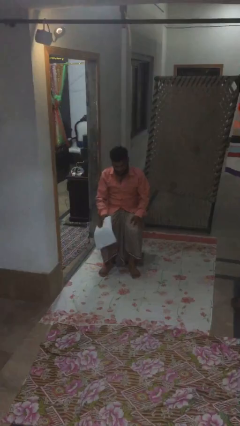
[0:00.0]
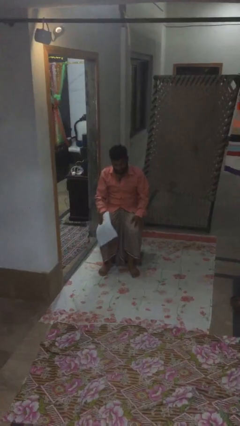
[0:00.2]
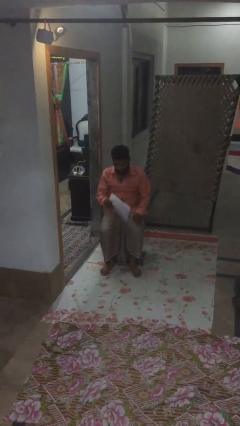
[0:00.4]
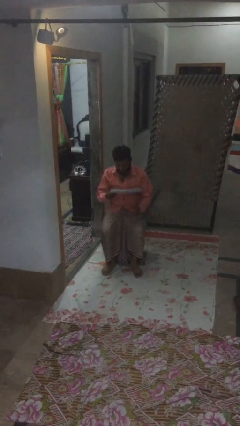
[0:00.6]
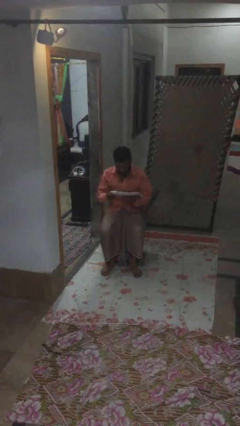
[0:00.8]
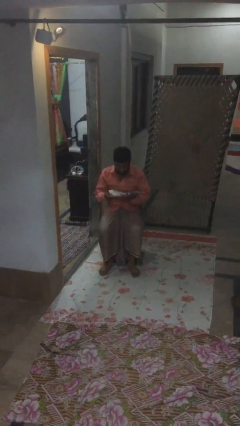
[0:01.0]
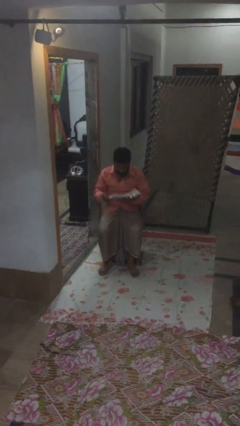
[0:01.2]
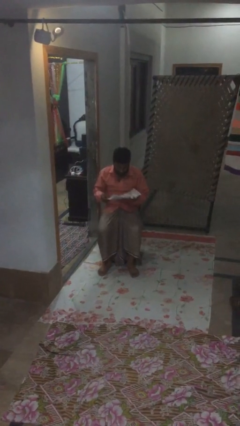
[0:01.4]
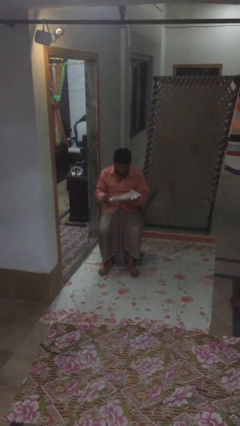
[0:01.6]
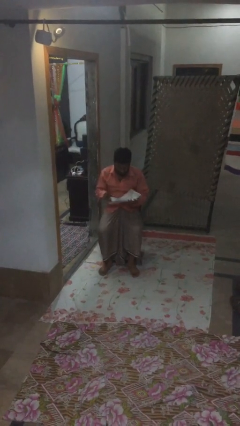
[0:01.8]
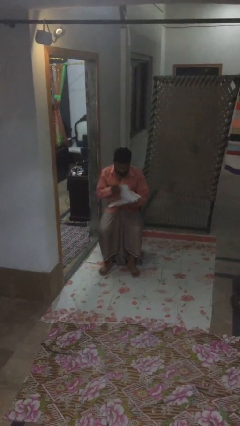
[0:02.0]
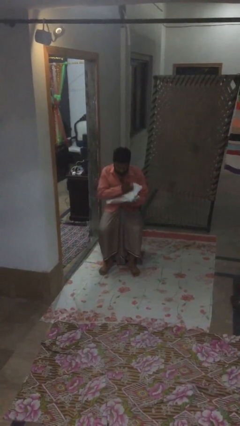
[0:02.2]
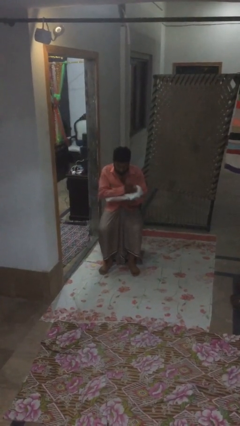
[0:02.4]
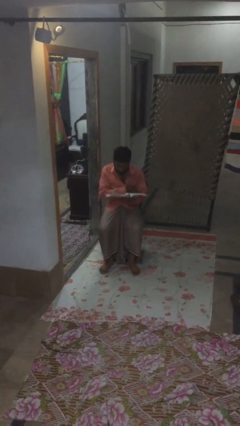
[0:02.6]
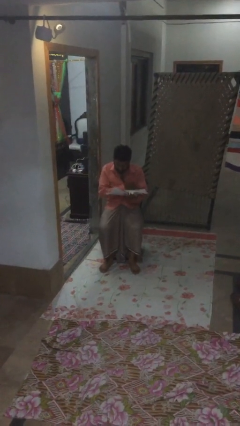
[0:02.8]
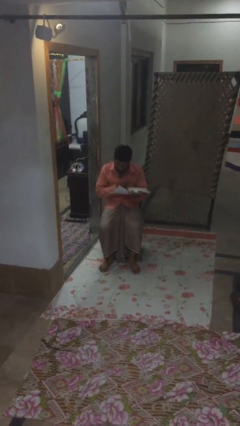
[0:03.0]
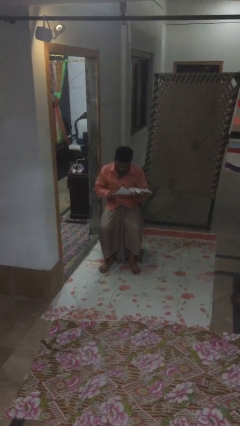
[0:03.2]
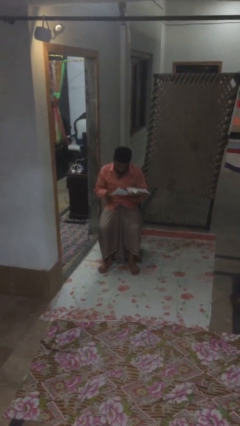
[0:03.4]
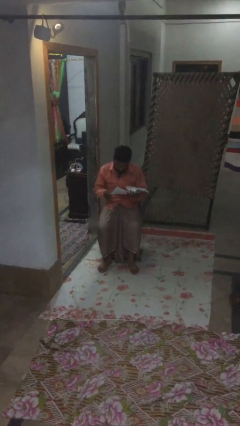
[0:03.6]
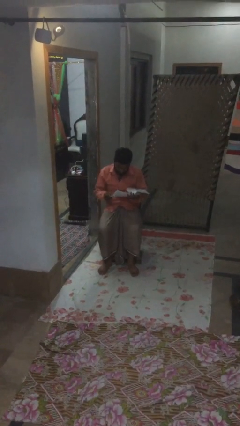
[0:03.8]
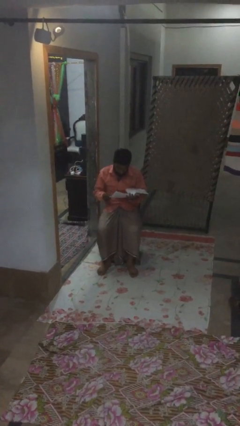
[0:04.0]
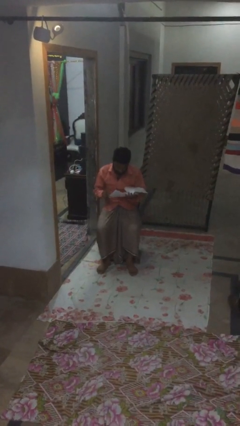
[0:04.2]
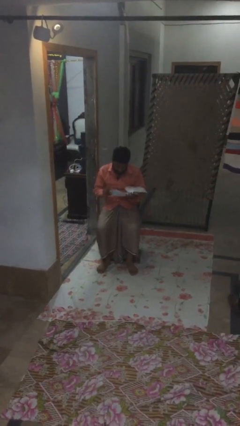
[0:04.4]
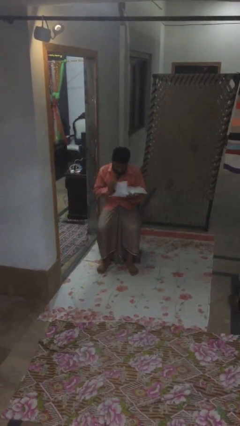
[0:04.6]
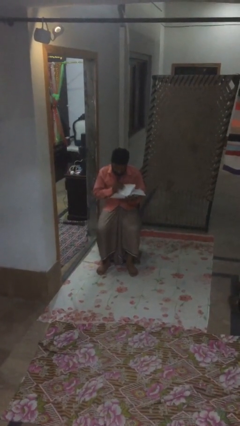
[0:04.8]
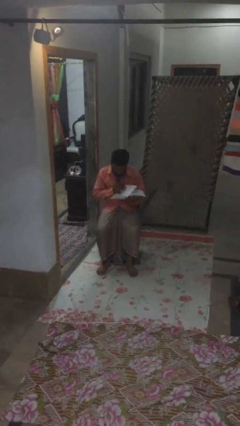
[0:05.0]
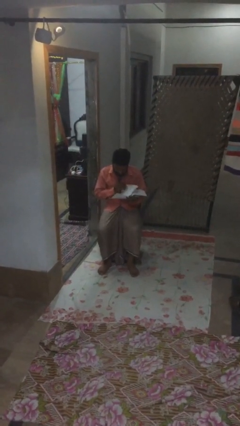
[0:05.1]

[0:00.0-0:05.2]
person reads document

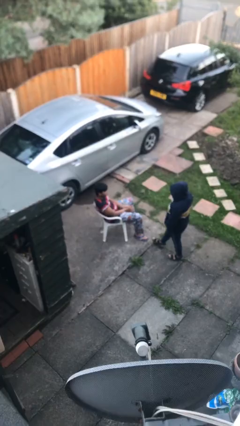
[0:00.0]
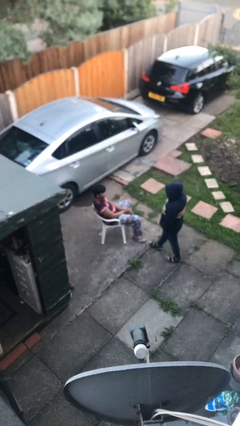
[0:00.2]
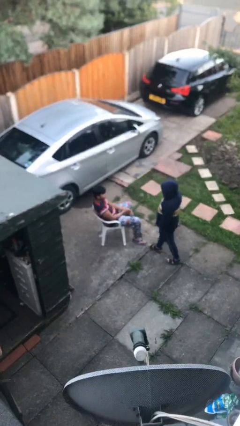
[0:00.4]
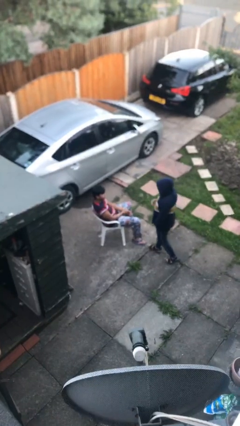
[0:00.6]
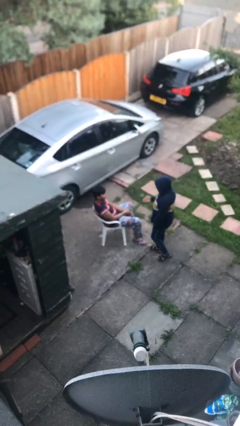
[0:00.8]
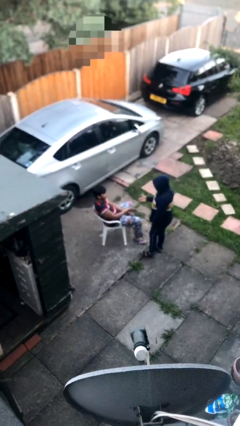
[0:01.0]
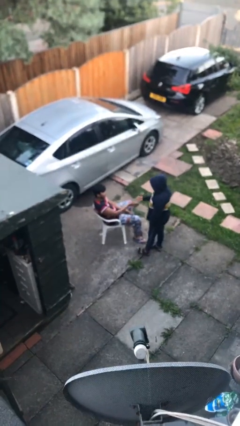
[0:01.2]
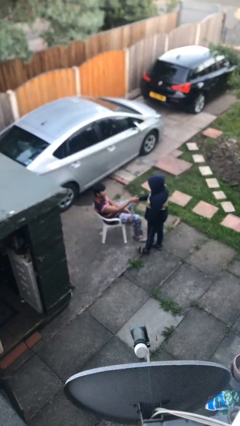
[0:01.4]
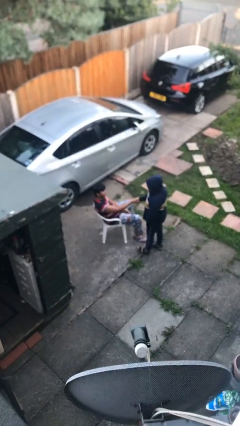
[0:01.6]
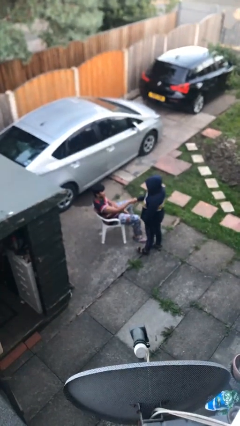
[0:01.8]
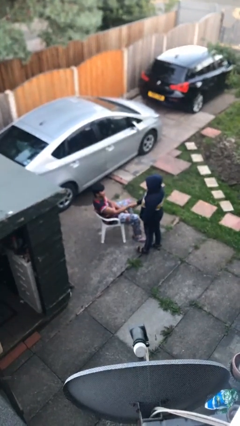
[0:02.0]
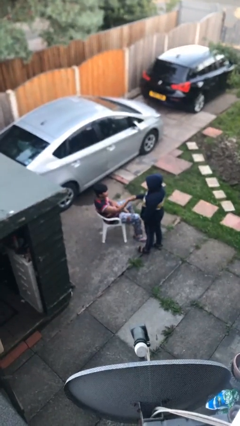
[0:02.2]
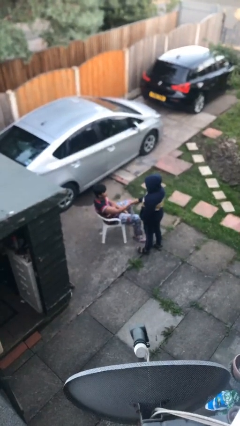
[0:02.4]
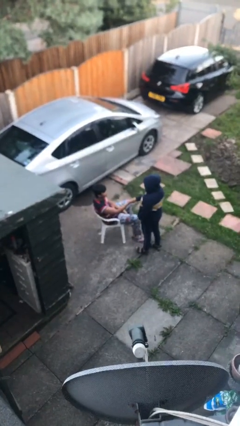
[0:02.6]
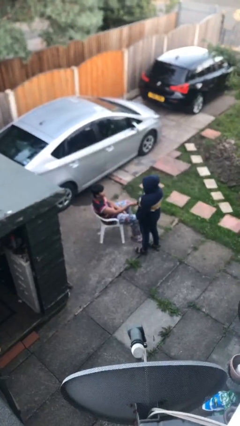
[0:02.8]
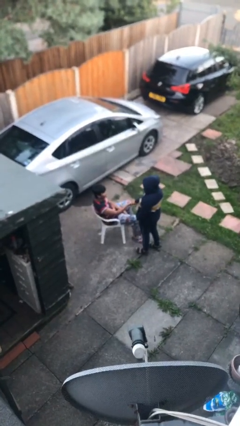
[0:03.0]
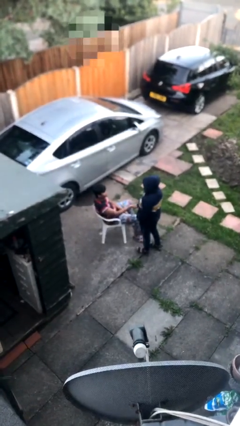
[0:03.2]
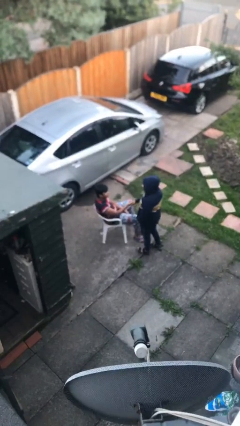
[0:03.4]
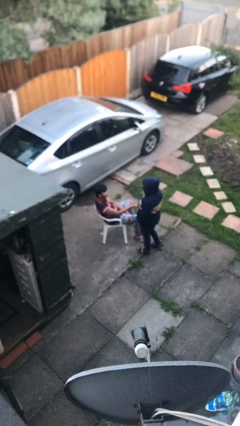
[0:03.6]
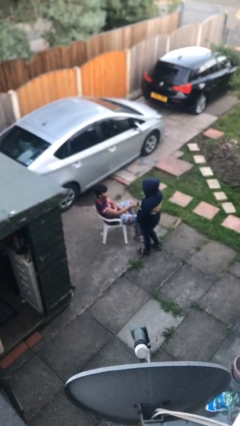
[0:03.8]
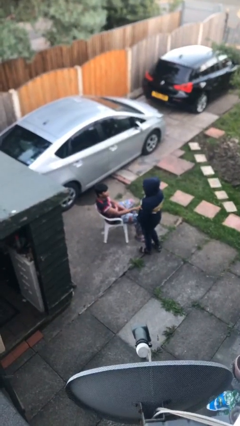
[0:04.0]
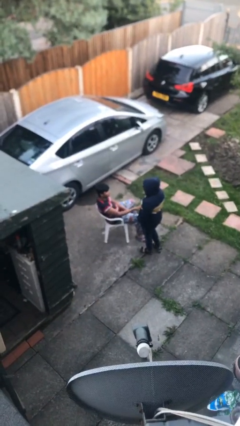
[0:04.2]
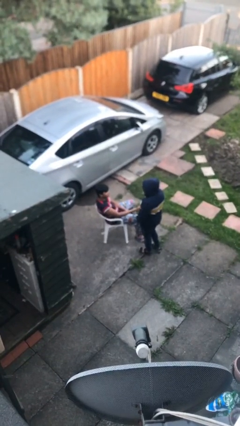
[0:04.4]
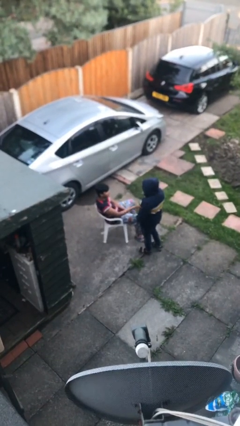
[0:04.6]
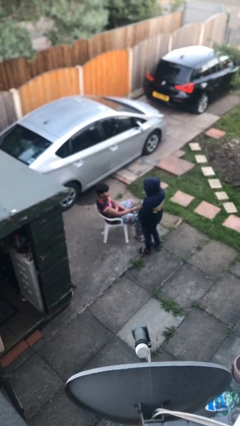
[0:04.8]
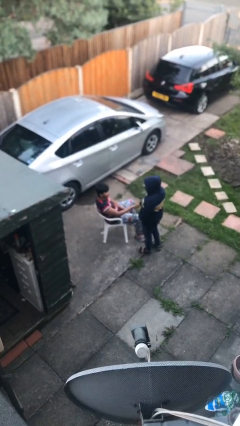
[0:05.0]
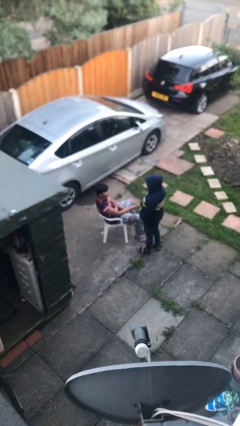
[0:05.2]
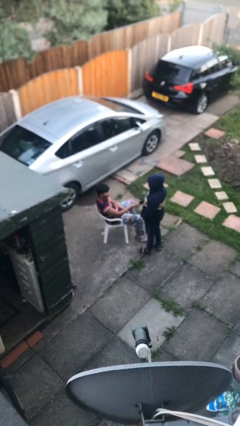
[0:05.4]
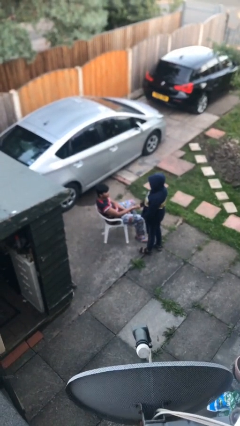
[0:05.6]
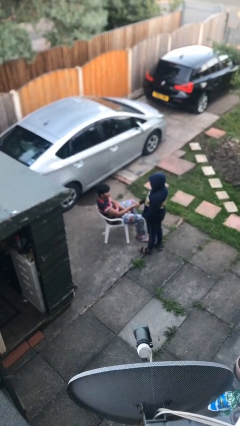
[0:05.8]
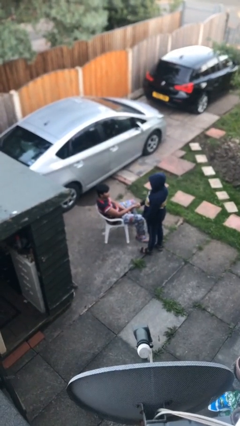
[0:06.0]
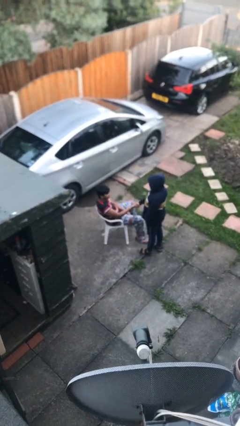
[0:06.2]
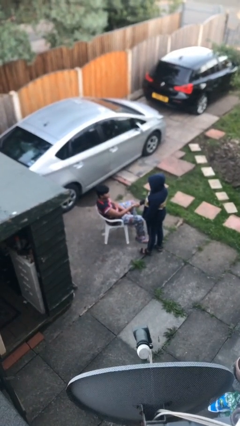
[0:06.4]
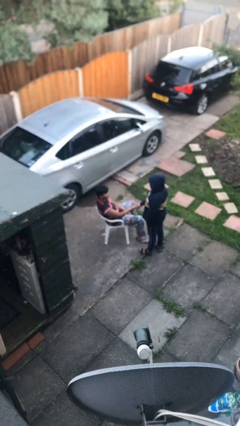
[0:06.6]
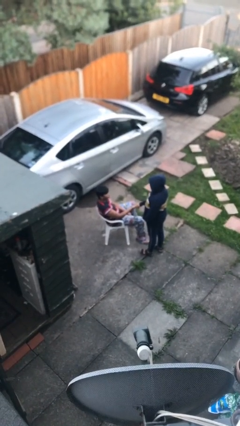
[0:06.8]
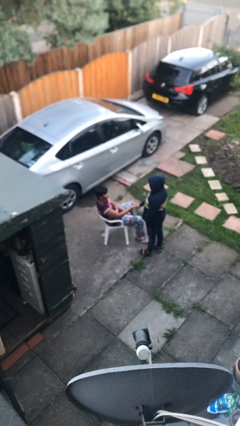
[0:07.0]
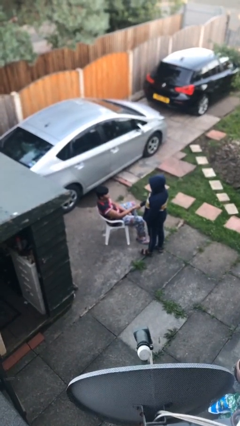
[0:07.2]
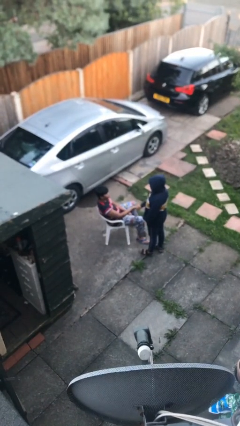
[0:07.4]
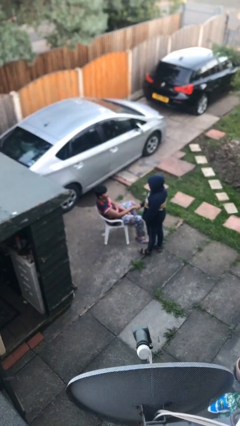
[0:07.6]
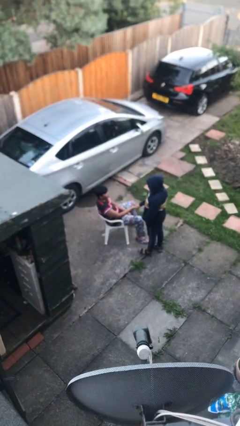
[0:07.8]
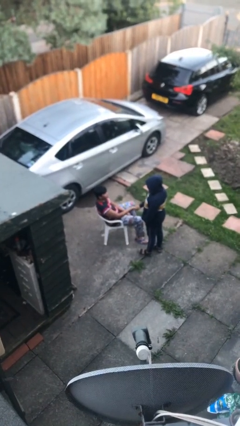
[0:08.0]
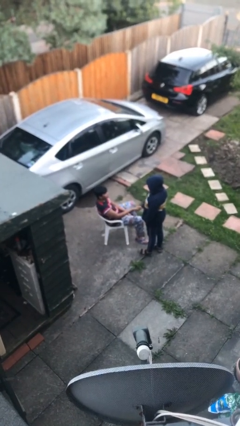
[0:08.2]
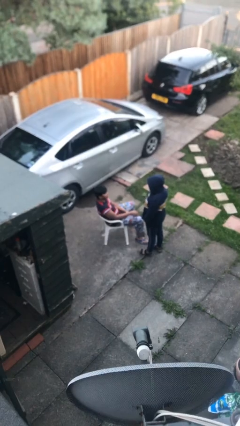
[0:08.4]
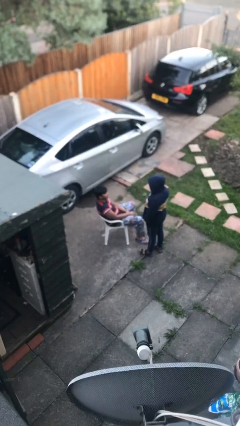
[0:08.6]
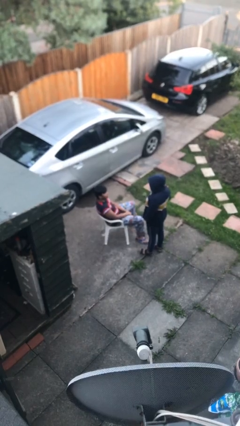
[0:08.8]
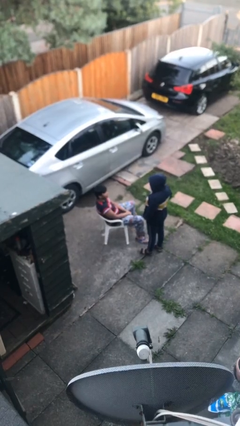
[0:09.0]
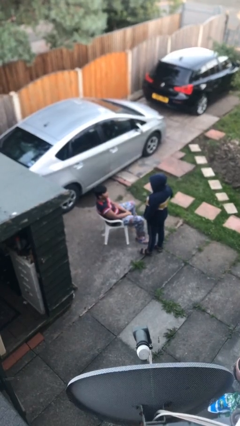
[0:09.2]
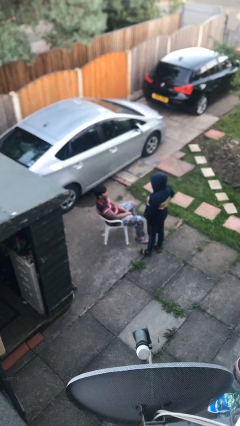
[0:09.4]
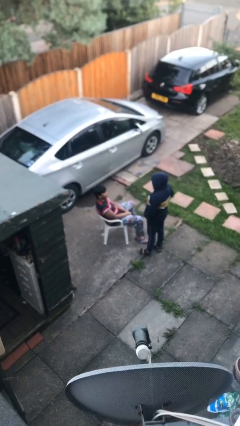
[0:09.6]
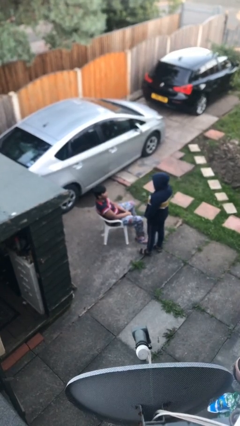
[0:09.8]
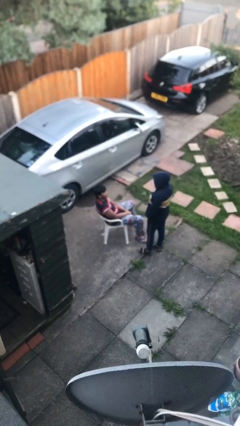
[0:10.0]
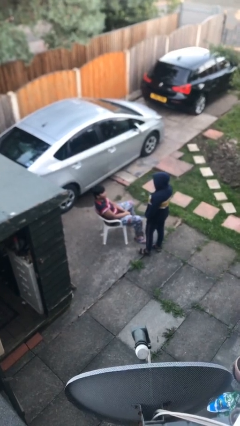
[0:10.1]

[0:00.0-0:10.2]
person shakes hand

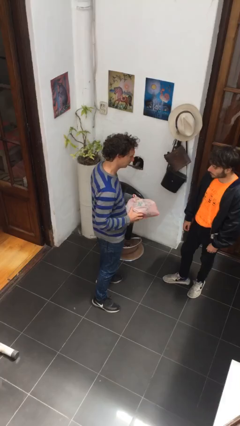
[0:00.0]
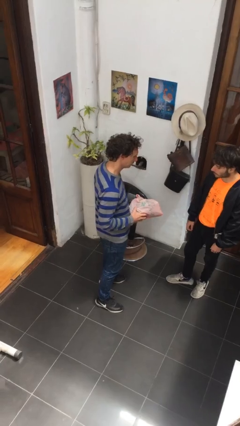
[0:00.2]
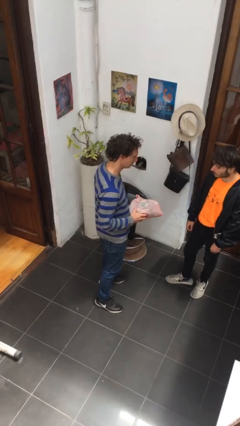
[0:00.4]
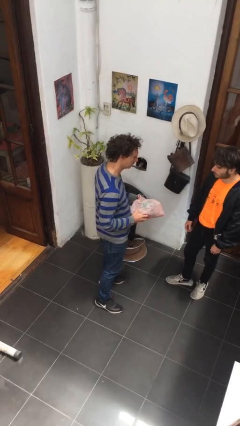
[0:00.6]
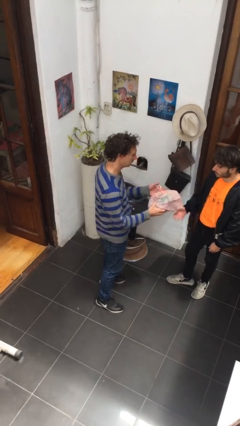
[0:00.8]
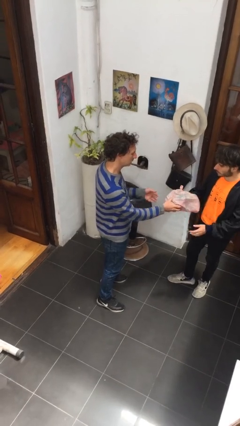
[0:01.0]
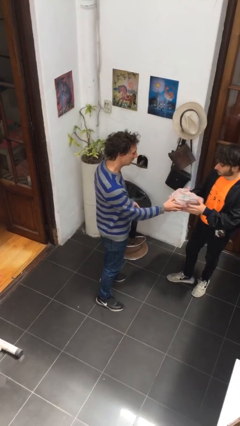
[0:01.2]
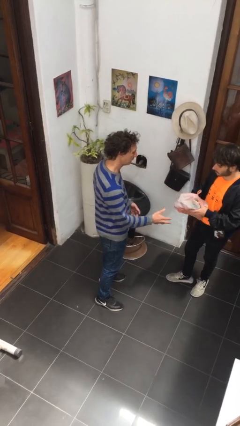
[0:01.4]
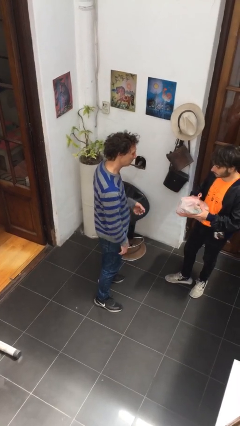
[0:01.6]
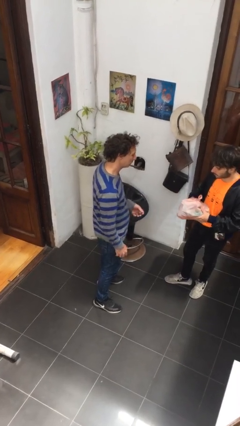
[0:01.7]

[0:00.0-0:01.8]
person transfers object to person

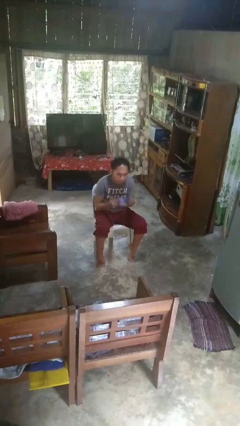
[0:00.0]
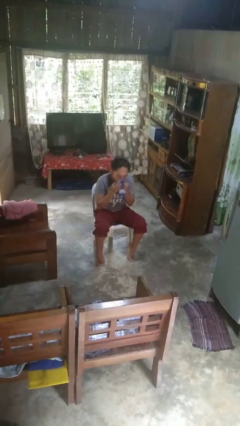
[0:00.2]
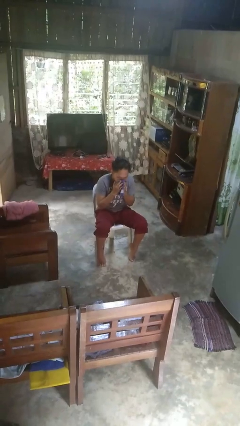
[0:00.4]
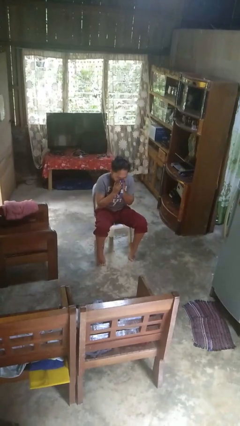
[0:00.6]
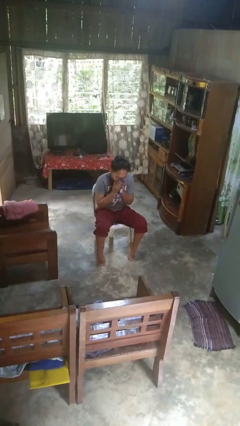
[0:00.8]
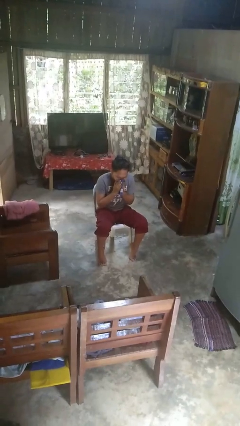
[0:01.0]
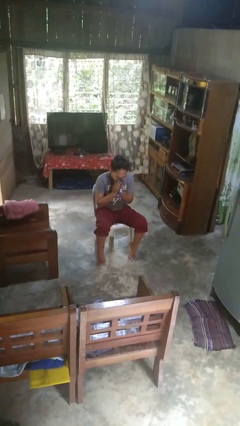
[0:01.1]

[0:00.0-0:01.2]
person blows nose
